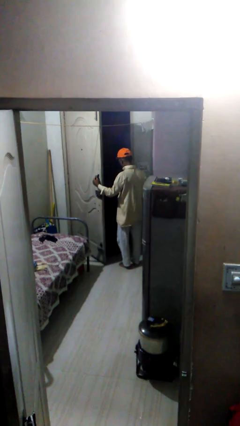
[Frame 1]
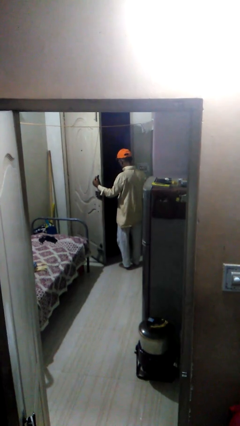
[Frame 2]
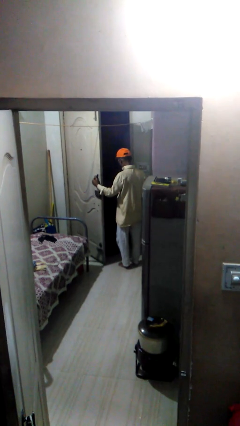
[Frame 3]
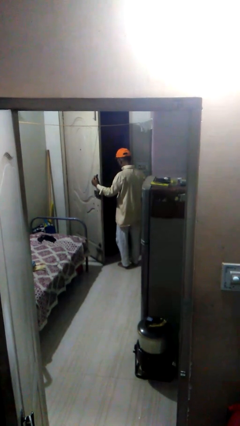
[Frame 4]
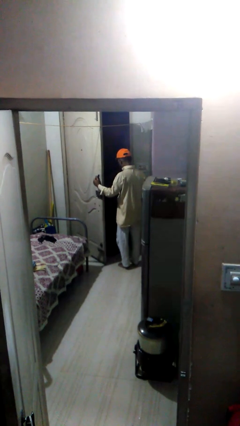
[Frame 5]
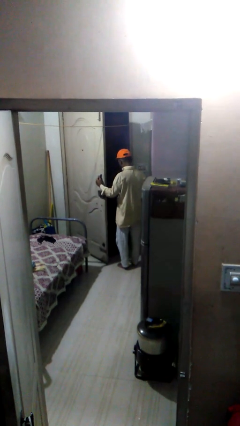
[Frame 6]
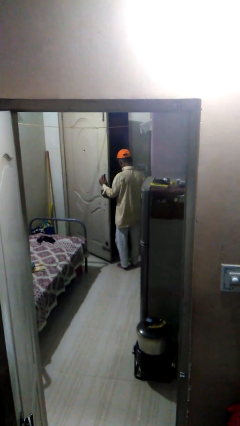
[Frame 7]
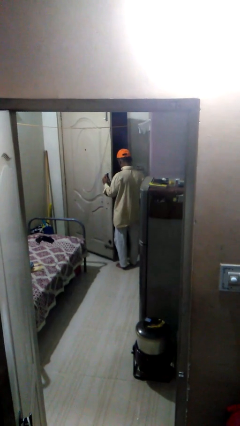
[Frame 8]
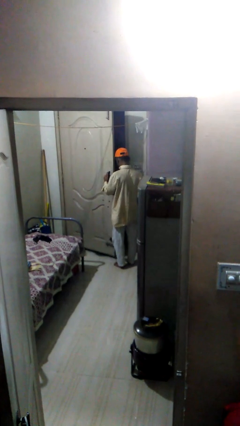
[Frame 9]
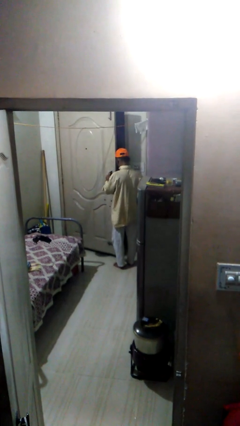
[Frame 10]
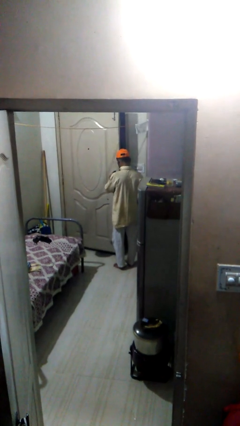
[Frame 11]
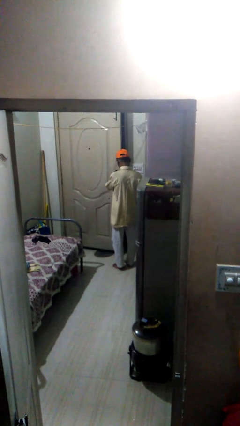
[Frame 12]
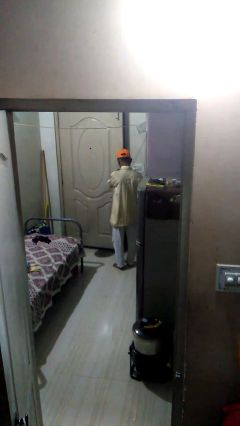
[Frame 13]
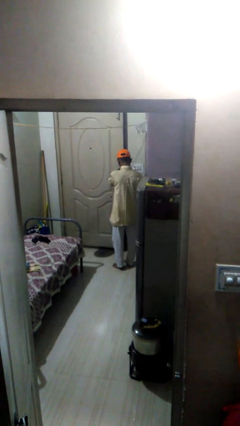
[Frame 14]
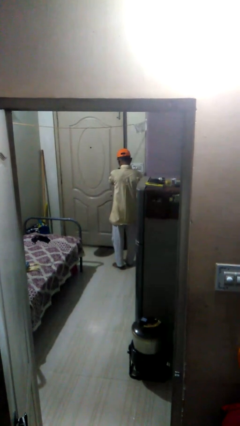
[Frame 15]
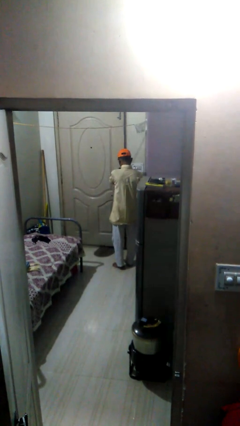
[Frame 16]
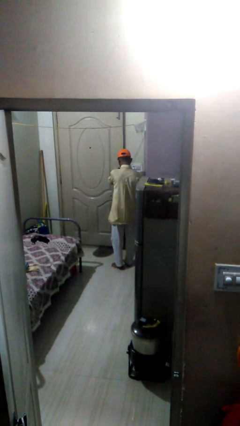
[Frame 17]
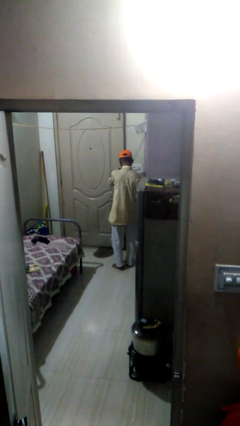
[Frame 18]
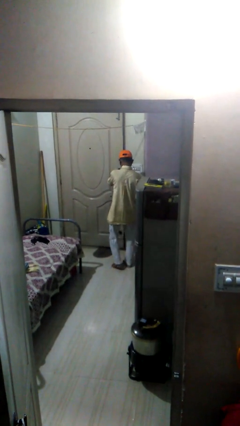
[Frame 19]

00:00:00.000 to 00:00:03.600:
person closes facility door

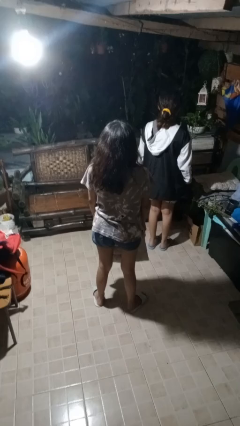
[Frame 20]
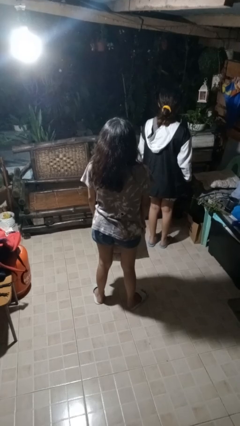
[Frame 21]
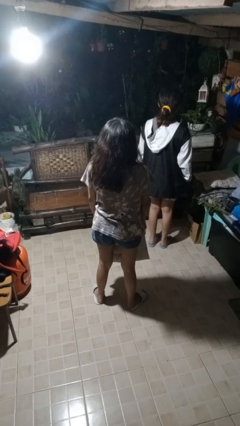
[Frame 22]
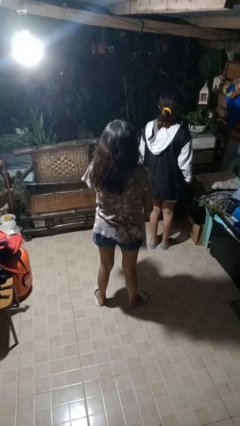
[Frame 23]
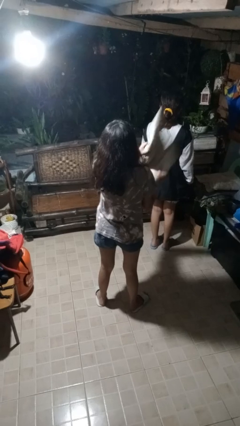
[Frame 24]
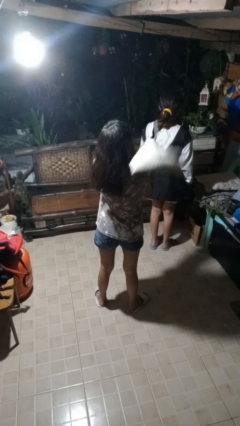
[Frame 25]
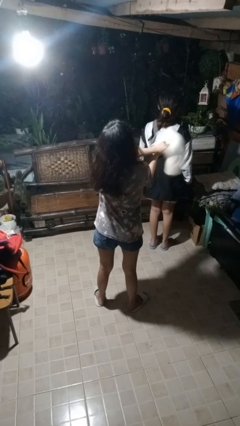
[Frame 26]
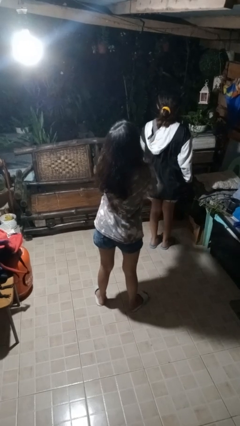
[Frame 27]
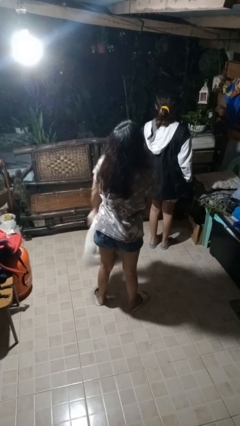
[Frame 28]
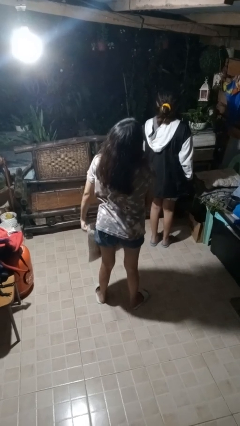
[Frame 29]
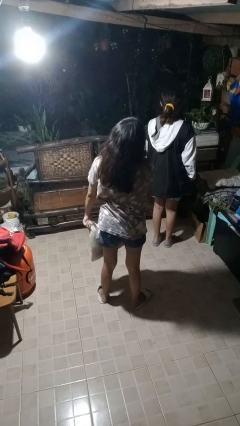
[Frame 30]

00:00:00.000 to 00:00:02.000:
person hits person with pillow

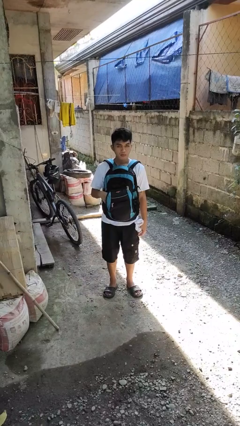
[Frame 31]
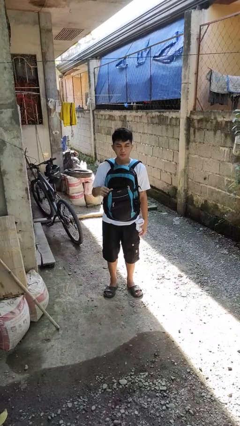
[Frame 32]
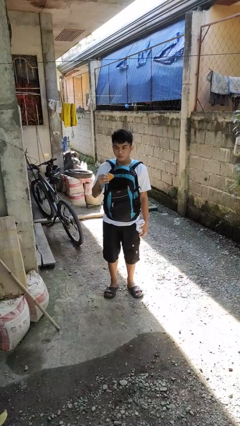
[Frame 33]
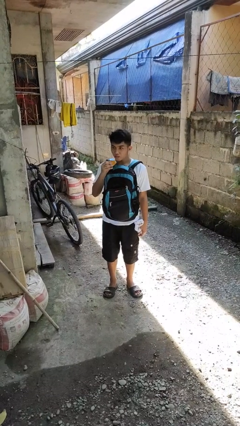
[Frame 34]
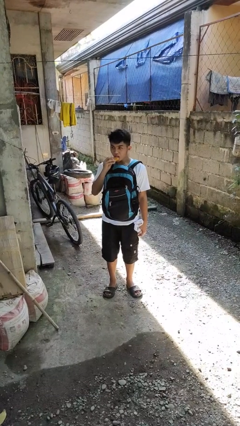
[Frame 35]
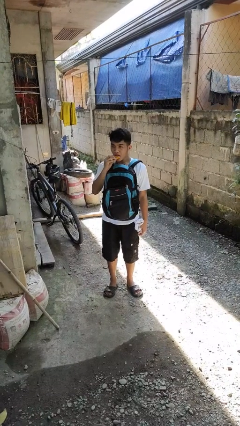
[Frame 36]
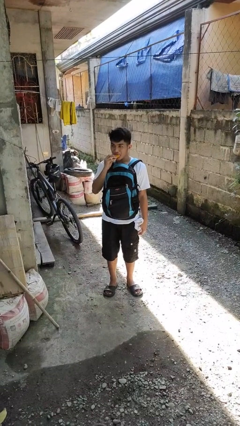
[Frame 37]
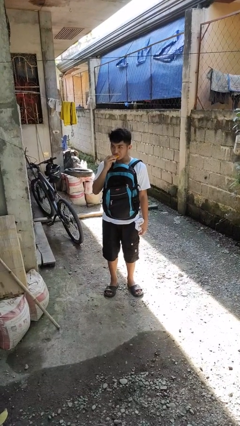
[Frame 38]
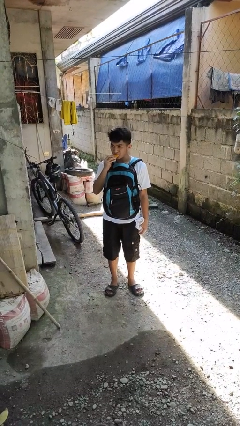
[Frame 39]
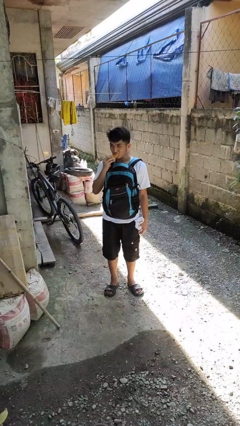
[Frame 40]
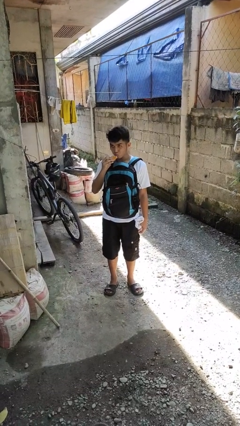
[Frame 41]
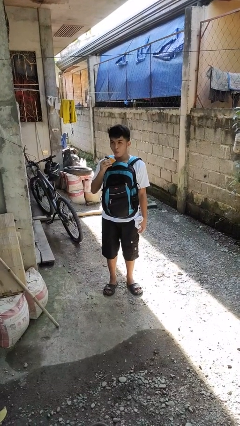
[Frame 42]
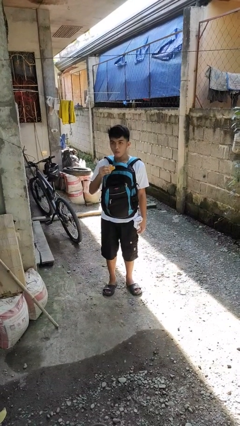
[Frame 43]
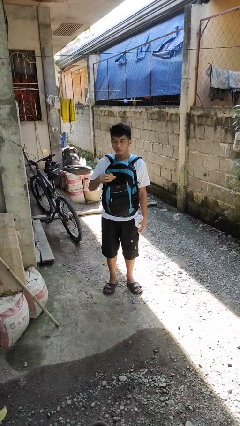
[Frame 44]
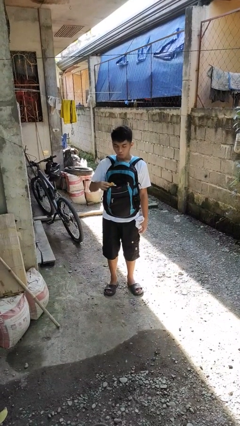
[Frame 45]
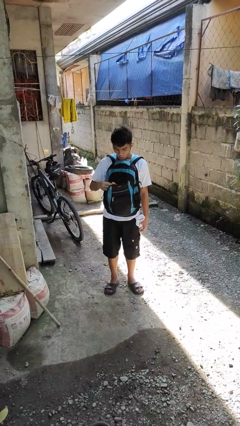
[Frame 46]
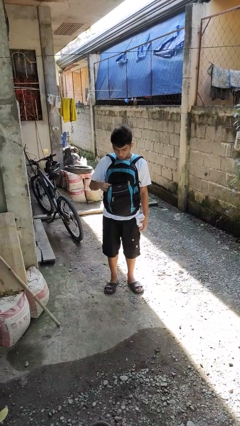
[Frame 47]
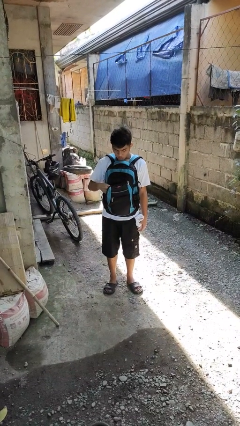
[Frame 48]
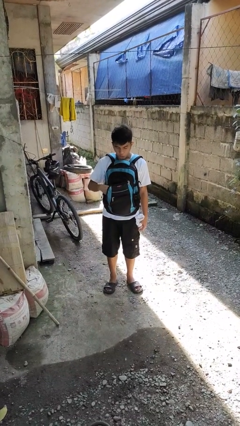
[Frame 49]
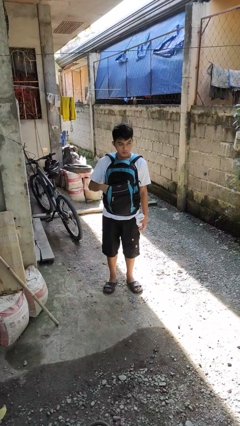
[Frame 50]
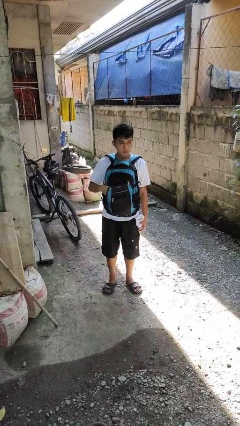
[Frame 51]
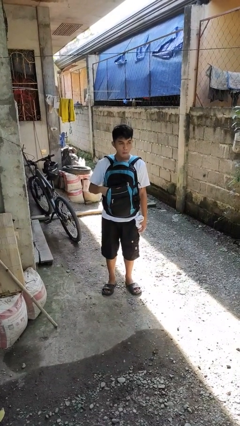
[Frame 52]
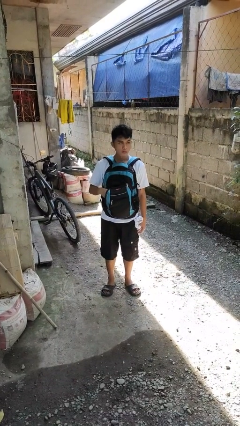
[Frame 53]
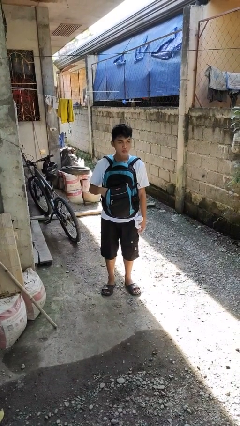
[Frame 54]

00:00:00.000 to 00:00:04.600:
person eats snack from bag

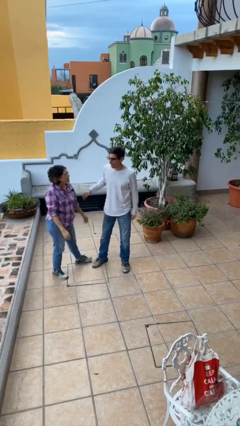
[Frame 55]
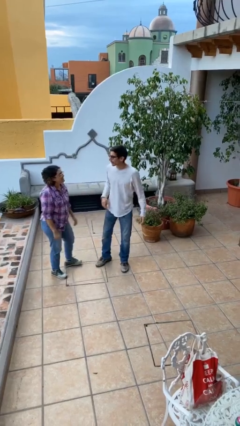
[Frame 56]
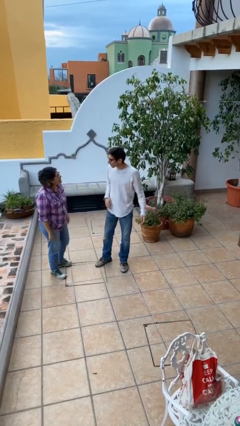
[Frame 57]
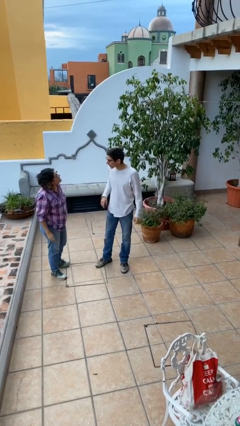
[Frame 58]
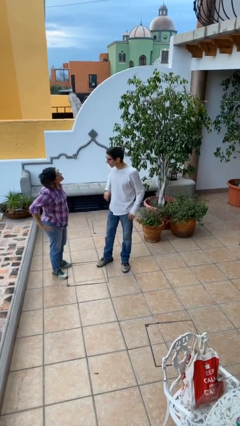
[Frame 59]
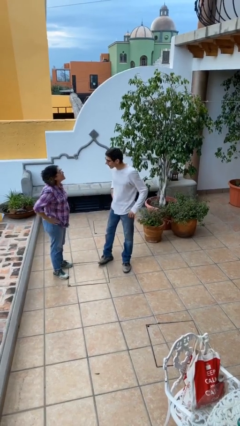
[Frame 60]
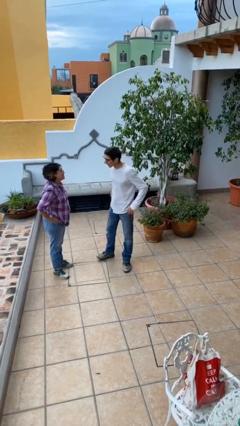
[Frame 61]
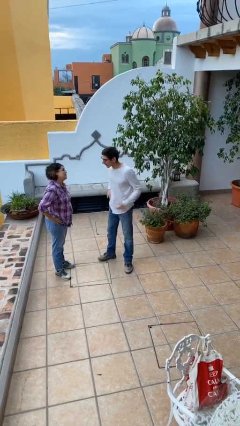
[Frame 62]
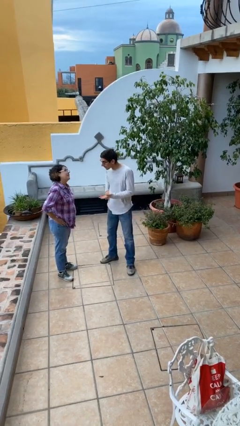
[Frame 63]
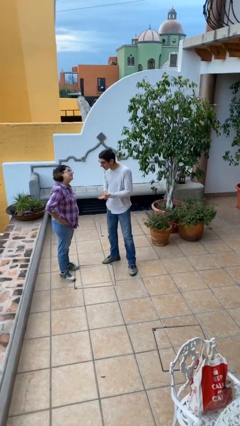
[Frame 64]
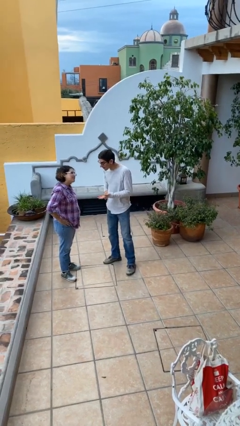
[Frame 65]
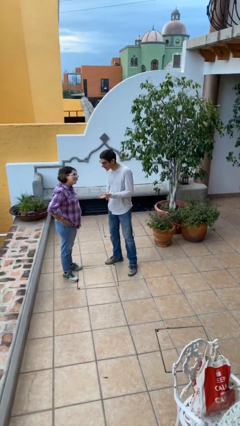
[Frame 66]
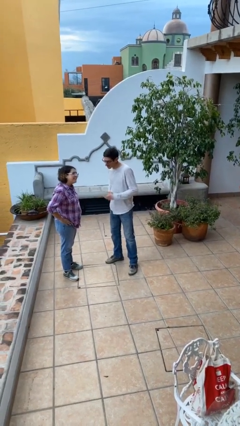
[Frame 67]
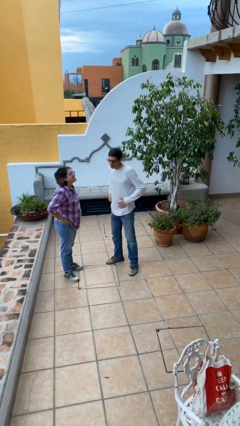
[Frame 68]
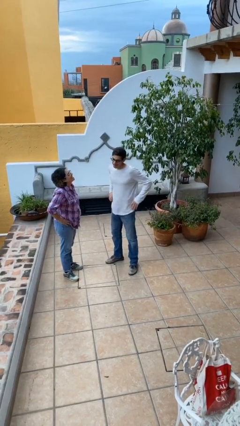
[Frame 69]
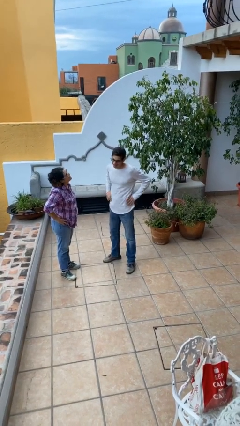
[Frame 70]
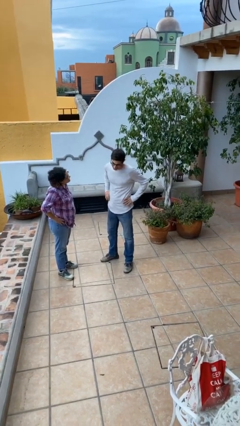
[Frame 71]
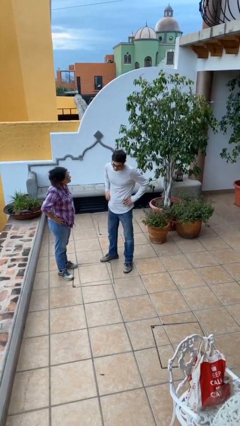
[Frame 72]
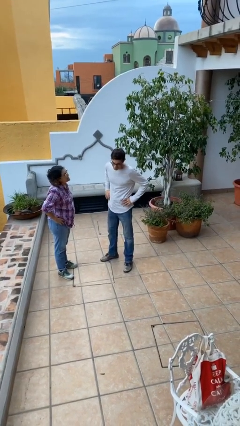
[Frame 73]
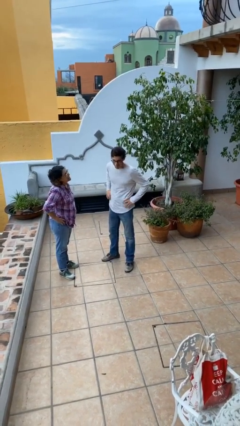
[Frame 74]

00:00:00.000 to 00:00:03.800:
person talks to person

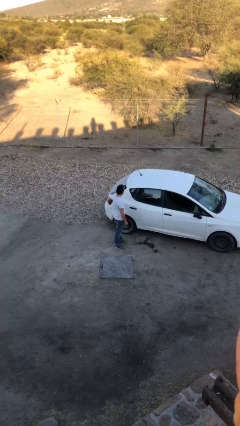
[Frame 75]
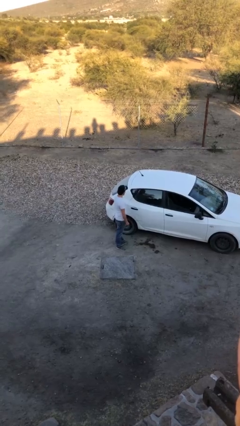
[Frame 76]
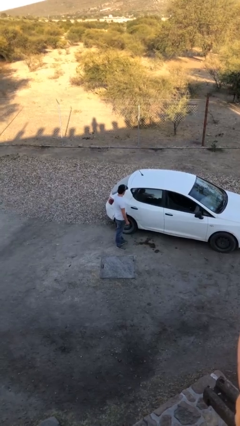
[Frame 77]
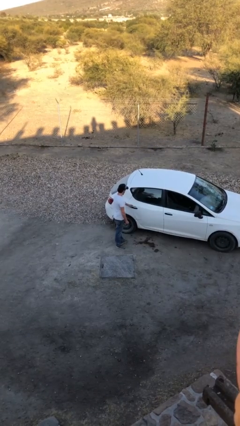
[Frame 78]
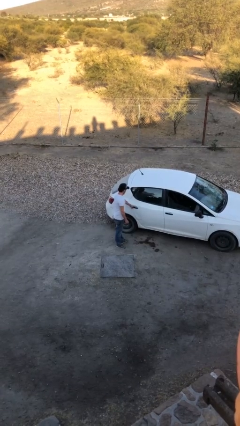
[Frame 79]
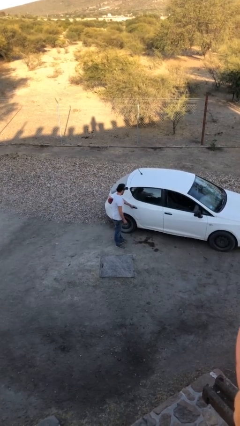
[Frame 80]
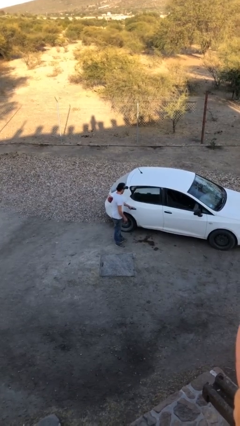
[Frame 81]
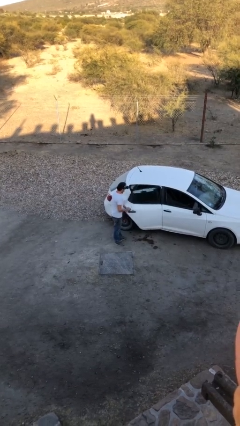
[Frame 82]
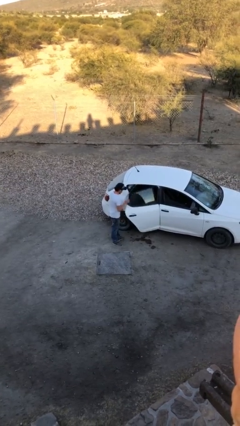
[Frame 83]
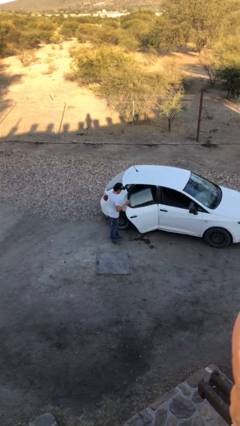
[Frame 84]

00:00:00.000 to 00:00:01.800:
person opens car door

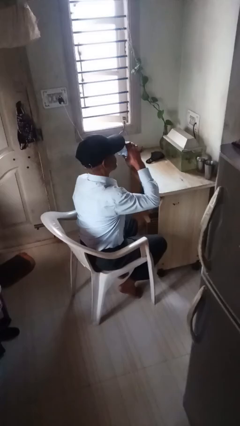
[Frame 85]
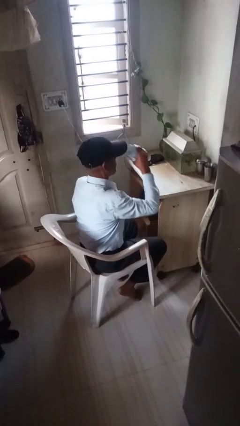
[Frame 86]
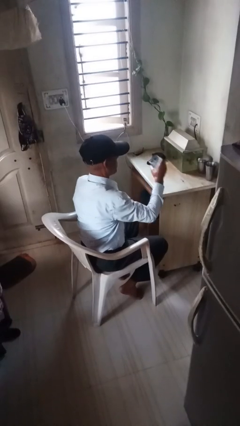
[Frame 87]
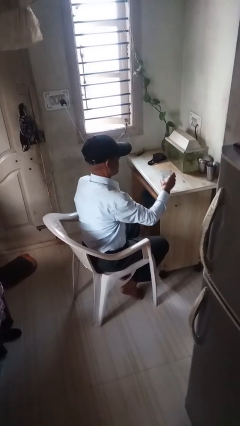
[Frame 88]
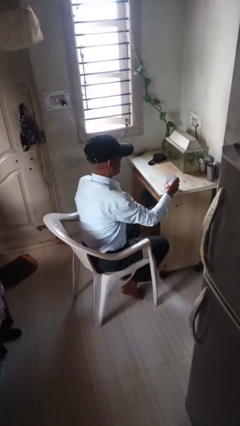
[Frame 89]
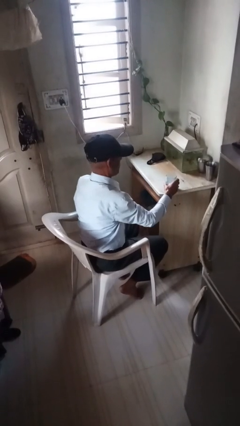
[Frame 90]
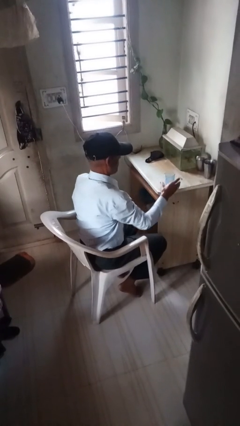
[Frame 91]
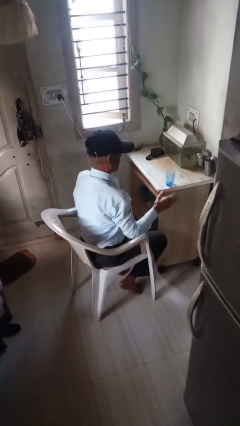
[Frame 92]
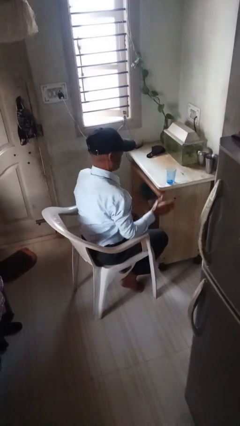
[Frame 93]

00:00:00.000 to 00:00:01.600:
person puts down object on table
